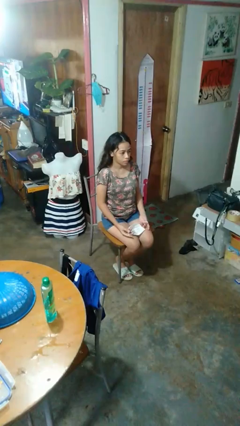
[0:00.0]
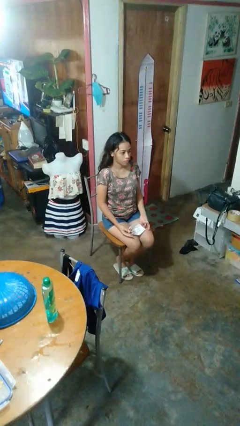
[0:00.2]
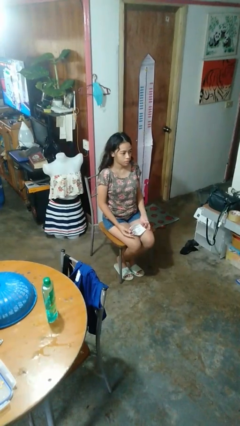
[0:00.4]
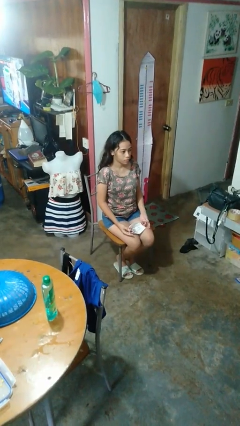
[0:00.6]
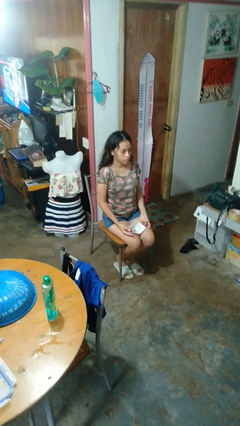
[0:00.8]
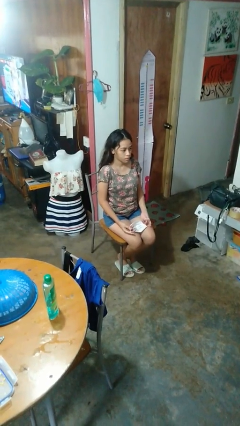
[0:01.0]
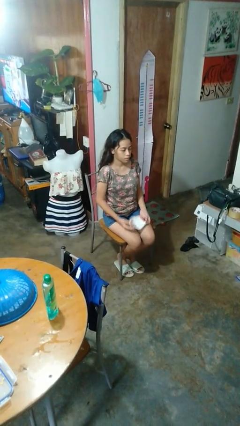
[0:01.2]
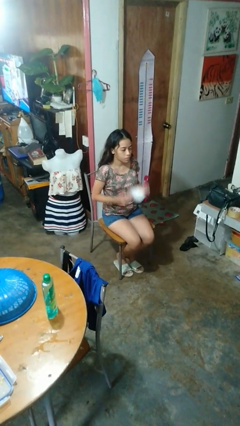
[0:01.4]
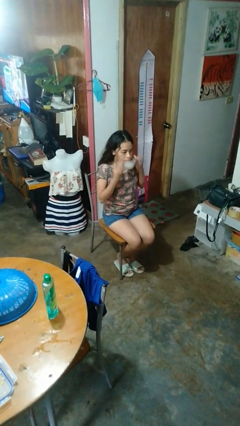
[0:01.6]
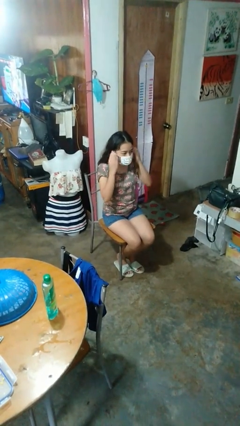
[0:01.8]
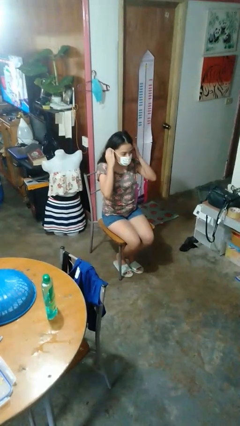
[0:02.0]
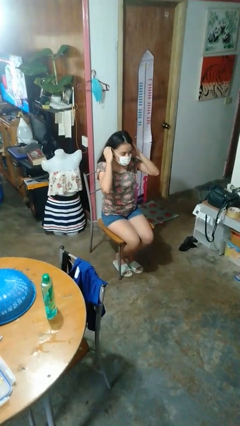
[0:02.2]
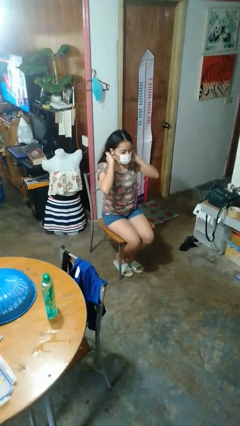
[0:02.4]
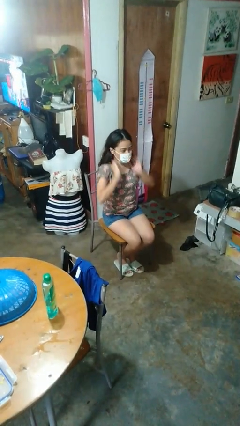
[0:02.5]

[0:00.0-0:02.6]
person opens mailbox

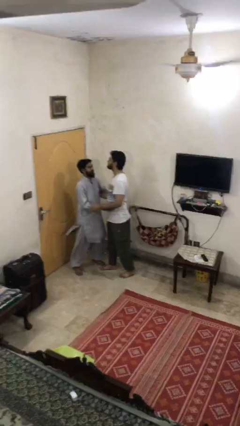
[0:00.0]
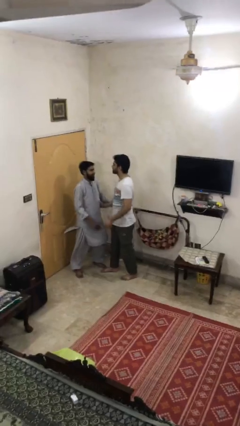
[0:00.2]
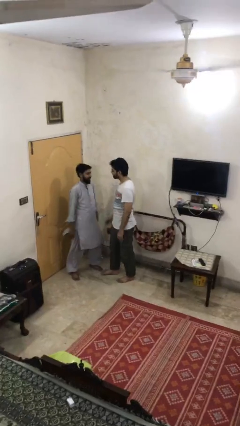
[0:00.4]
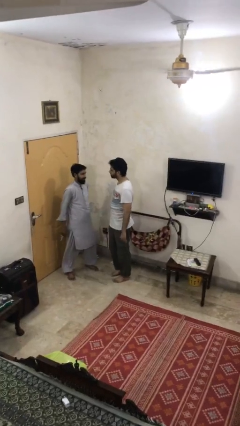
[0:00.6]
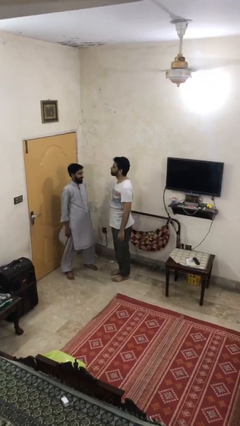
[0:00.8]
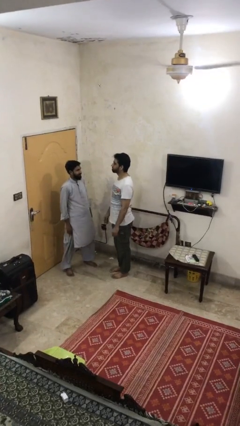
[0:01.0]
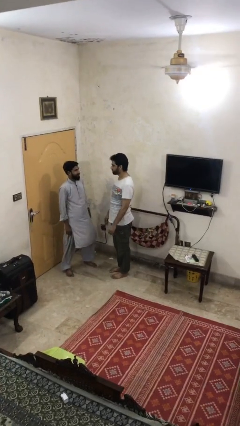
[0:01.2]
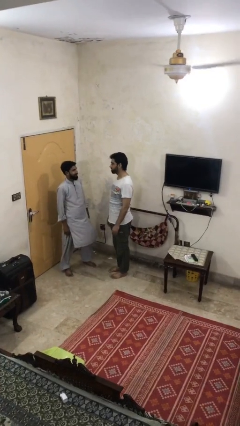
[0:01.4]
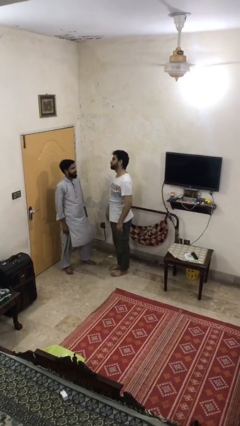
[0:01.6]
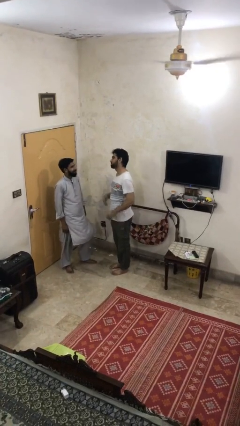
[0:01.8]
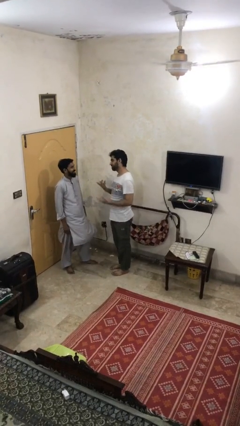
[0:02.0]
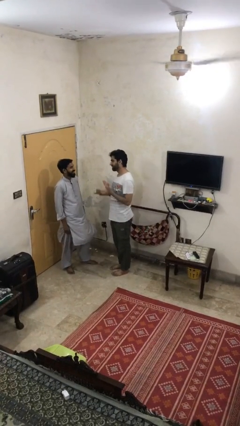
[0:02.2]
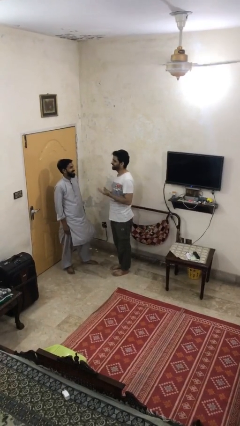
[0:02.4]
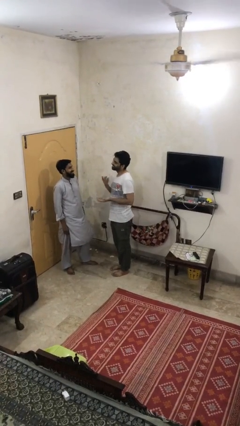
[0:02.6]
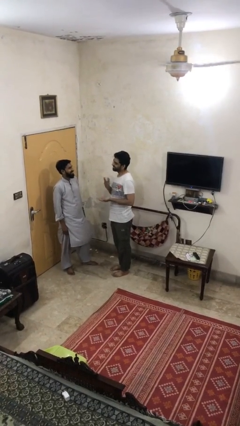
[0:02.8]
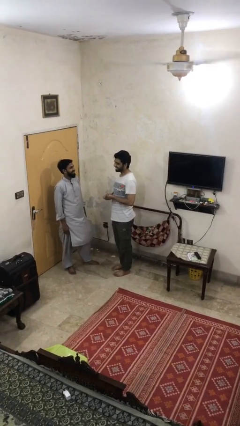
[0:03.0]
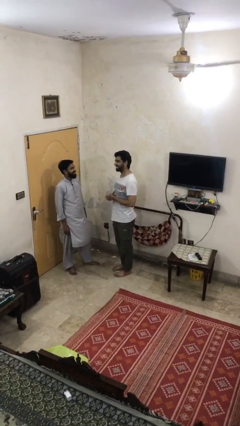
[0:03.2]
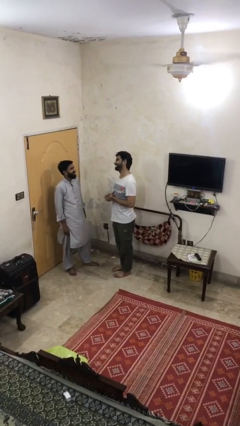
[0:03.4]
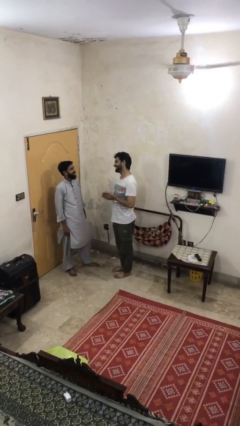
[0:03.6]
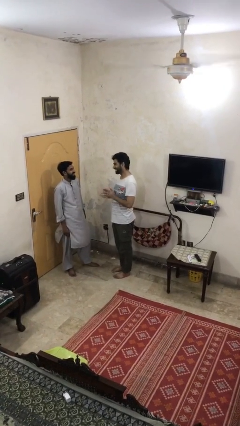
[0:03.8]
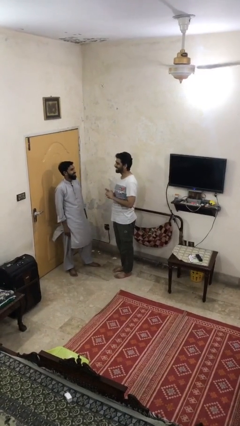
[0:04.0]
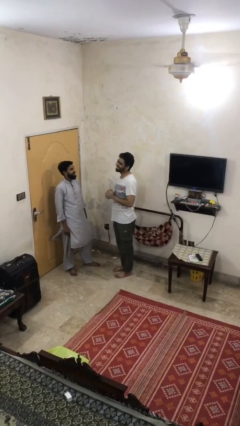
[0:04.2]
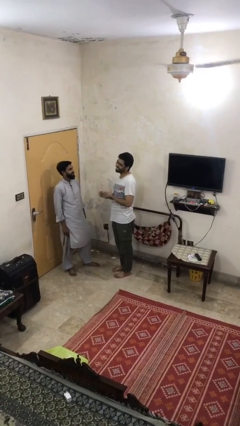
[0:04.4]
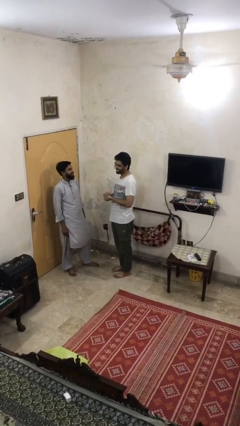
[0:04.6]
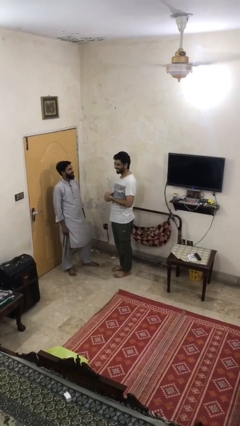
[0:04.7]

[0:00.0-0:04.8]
person talks to person

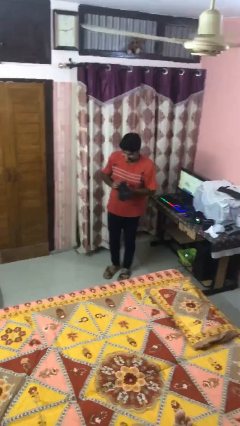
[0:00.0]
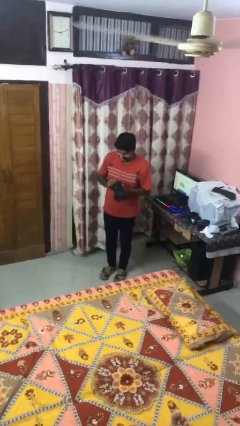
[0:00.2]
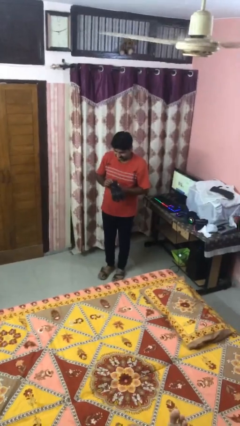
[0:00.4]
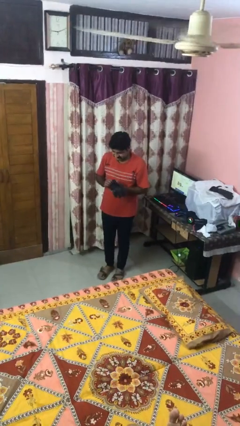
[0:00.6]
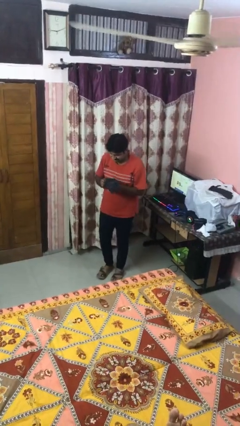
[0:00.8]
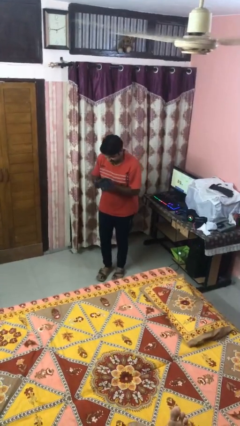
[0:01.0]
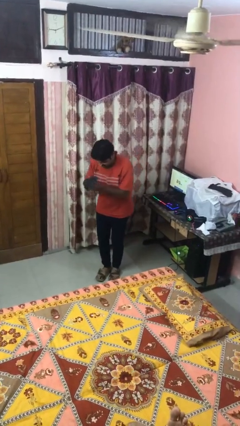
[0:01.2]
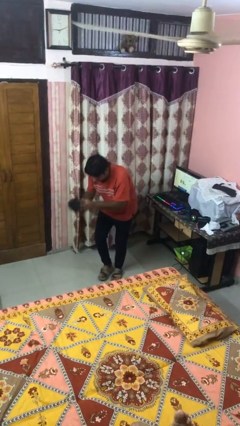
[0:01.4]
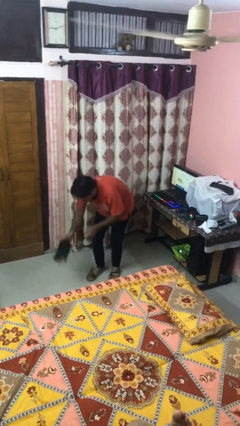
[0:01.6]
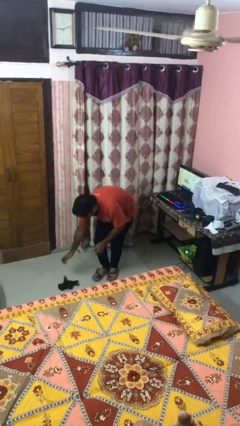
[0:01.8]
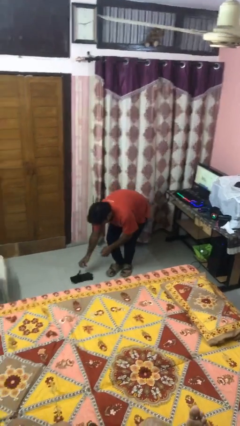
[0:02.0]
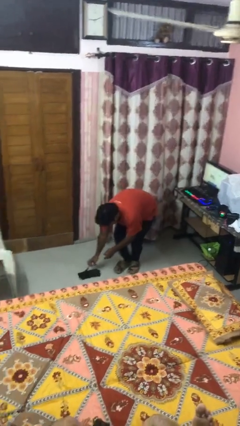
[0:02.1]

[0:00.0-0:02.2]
person drops object

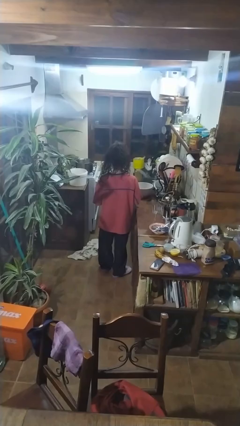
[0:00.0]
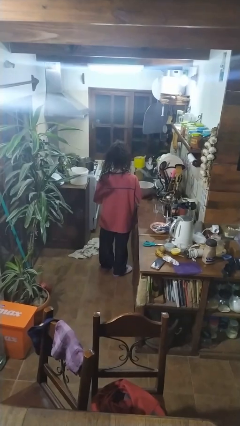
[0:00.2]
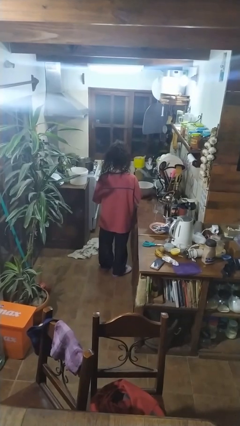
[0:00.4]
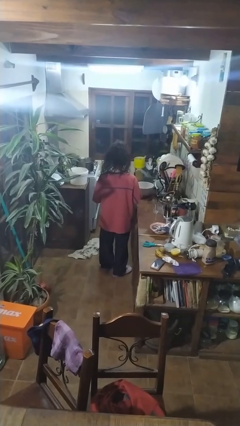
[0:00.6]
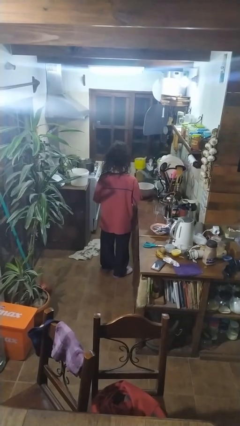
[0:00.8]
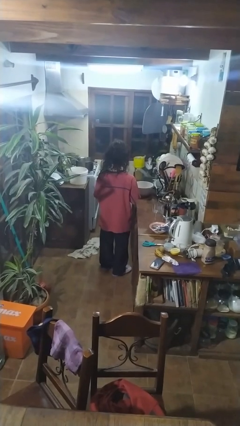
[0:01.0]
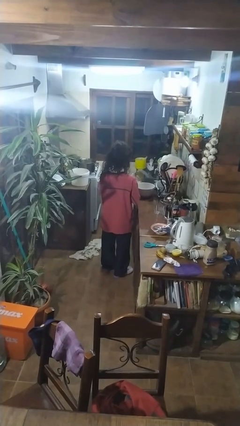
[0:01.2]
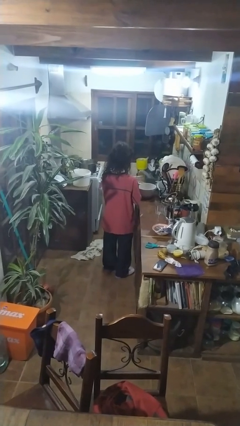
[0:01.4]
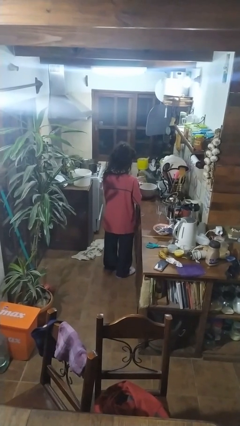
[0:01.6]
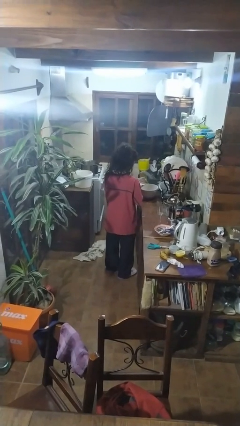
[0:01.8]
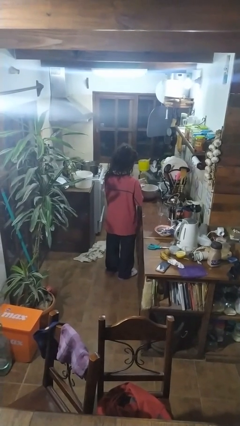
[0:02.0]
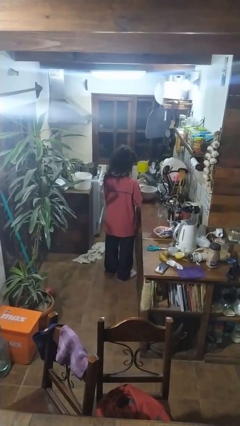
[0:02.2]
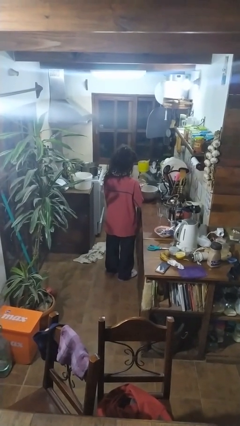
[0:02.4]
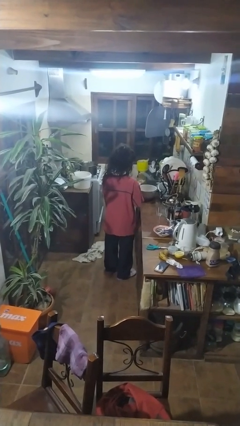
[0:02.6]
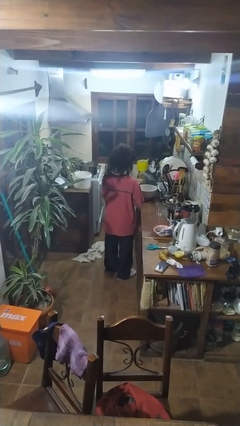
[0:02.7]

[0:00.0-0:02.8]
person pours into bowl

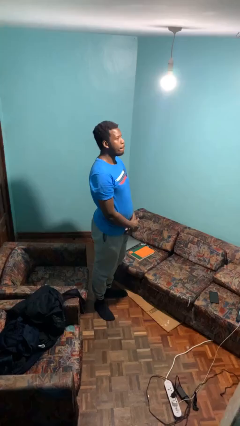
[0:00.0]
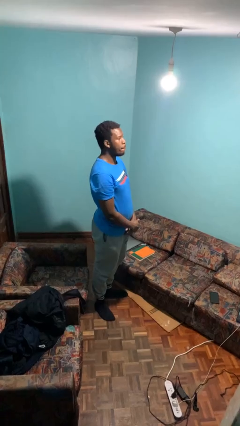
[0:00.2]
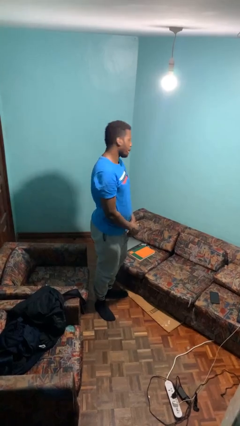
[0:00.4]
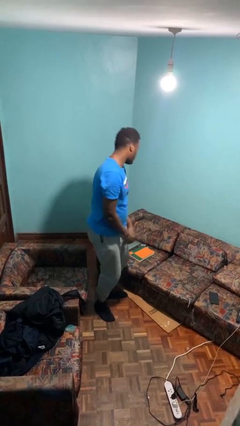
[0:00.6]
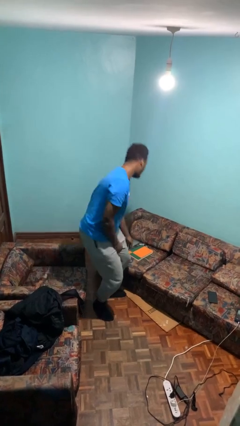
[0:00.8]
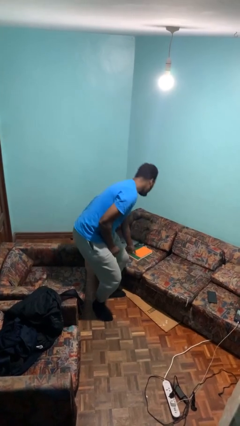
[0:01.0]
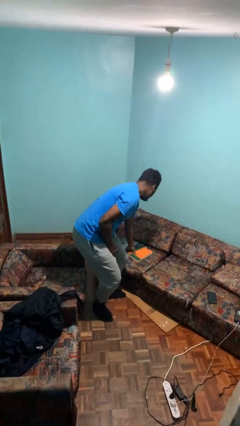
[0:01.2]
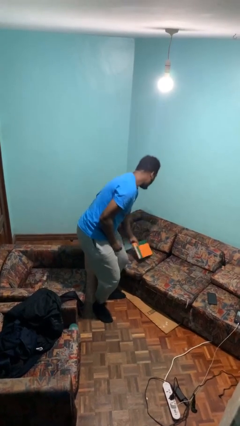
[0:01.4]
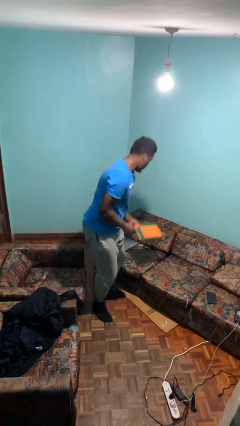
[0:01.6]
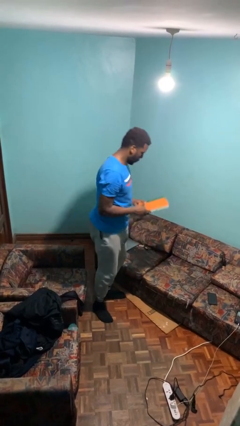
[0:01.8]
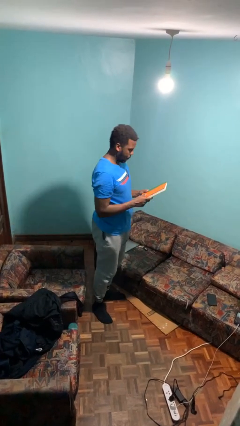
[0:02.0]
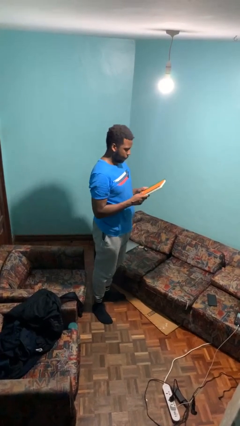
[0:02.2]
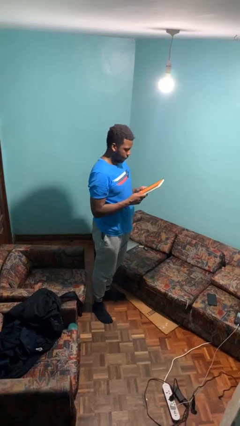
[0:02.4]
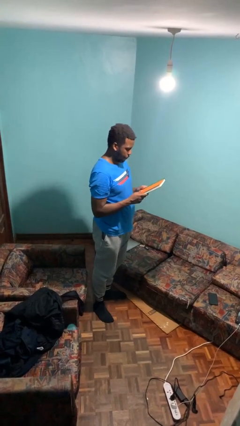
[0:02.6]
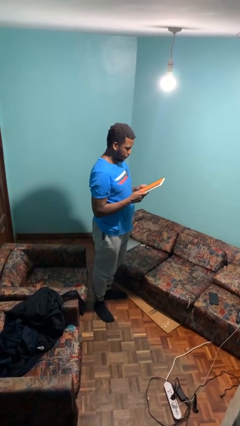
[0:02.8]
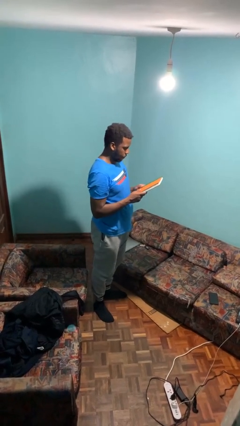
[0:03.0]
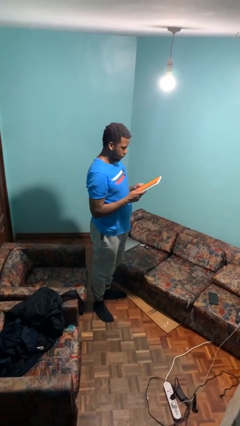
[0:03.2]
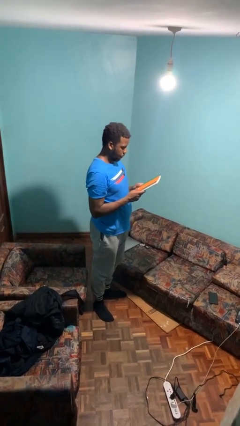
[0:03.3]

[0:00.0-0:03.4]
person picks up object from couch

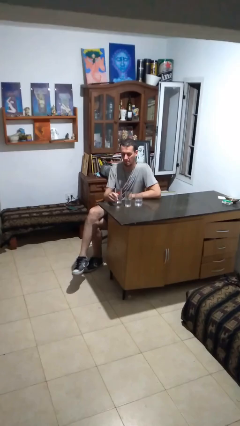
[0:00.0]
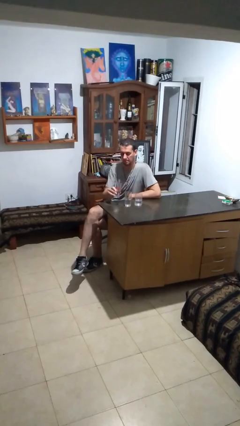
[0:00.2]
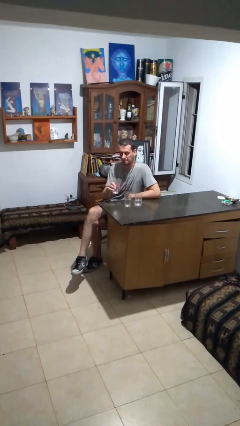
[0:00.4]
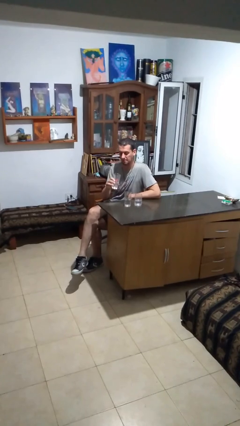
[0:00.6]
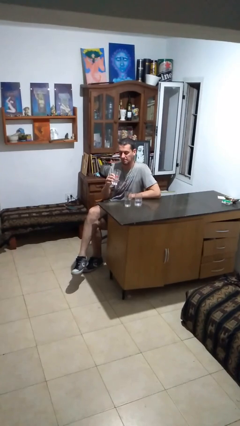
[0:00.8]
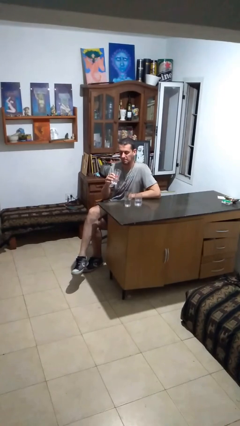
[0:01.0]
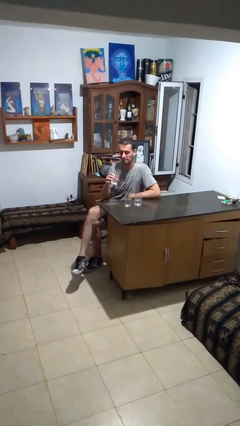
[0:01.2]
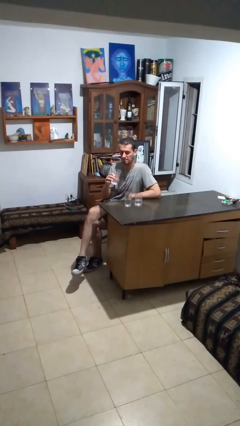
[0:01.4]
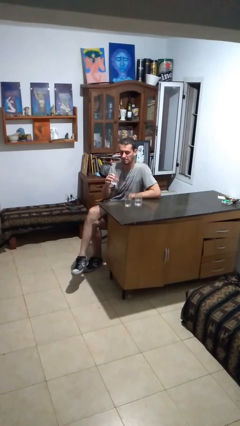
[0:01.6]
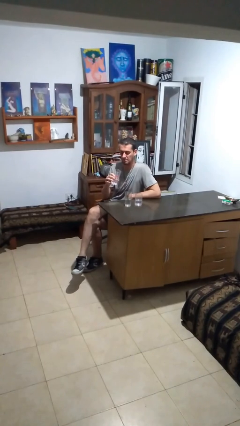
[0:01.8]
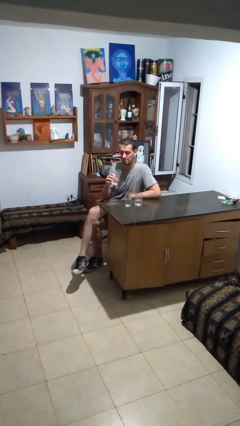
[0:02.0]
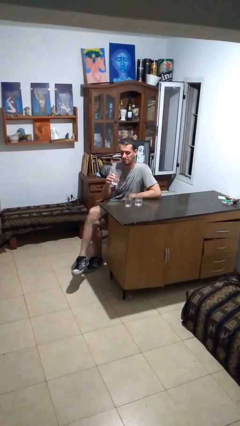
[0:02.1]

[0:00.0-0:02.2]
person picks up object from table
